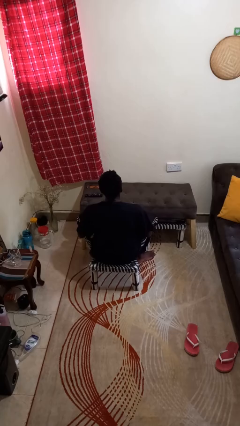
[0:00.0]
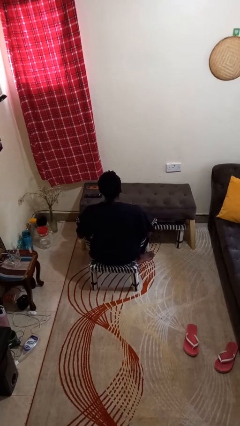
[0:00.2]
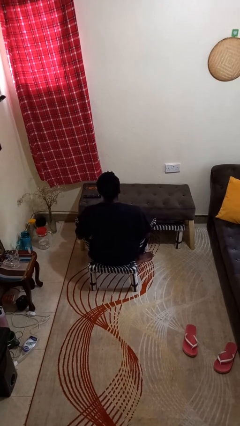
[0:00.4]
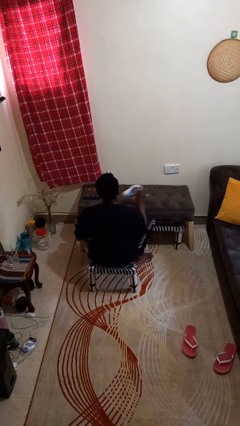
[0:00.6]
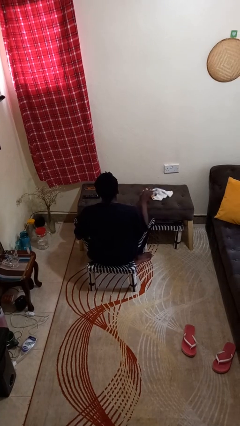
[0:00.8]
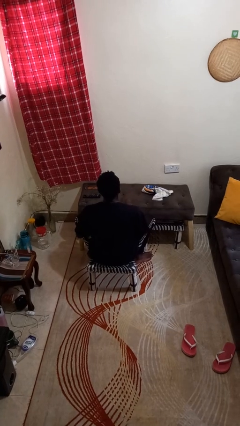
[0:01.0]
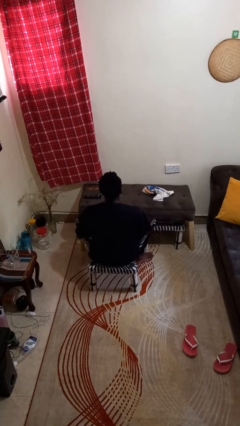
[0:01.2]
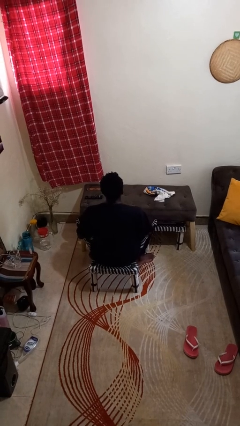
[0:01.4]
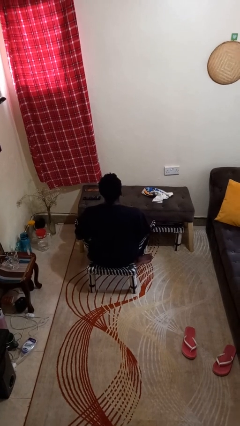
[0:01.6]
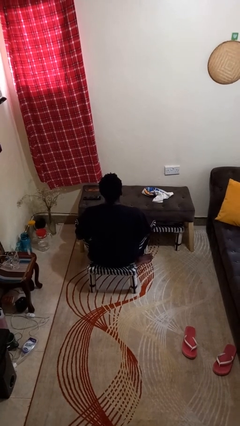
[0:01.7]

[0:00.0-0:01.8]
person throws object on table

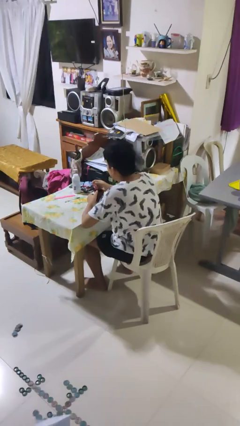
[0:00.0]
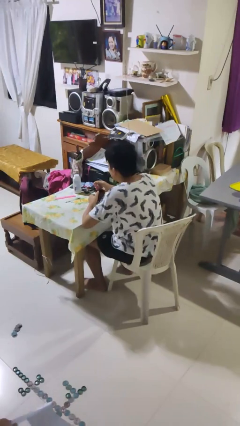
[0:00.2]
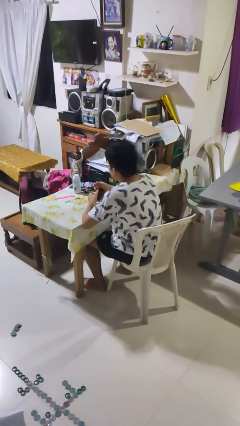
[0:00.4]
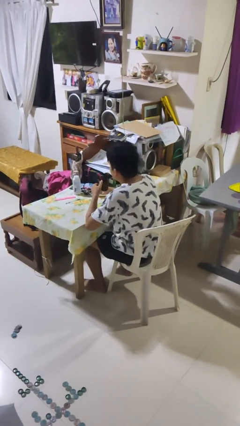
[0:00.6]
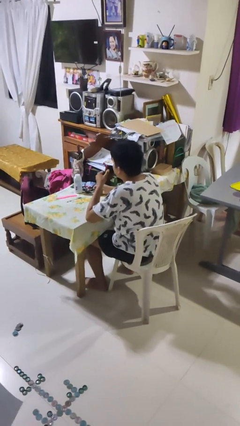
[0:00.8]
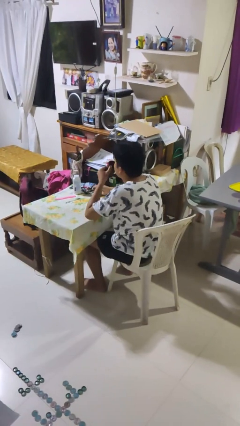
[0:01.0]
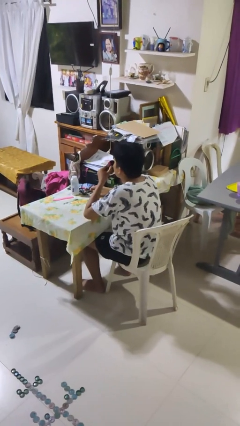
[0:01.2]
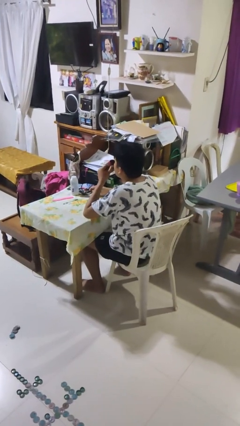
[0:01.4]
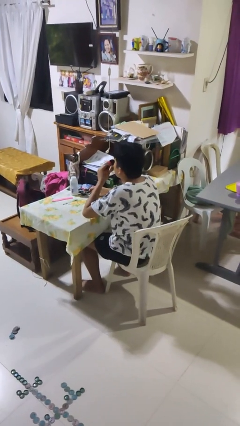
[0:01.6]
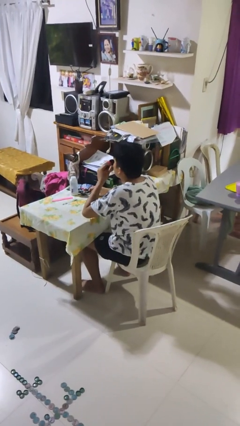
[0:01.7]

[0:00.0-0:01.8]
person drinks from mug

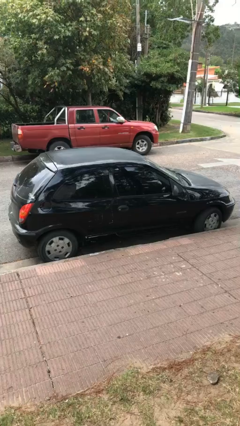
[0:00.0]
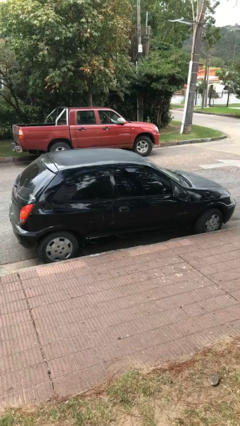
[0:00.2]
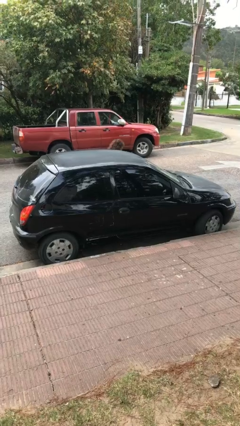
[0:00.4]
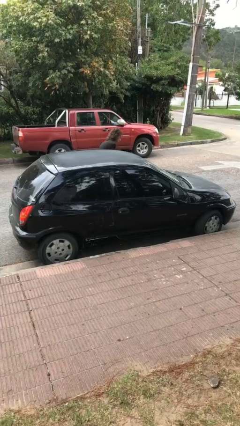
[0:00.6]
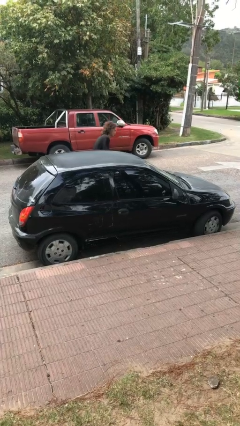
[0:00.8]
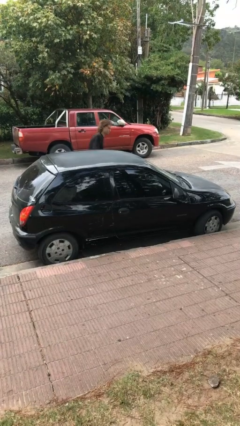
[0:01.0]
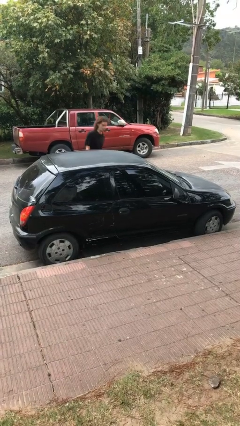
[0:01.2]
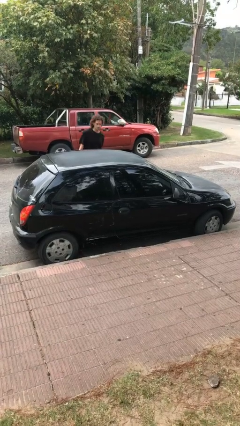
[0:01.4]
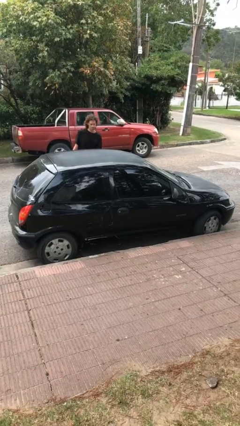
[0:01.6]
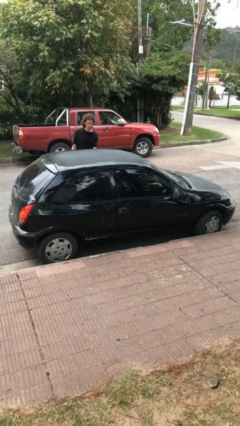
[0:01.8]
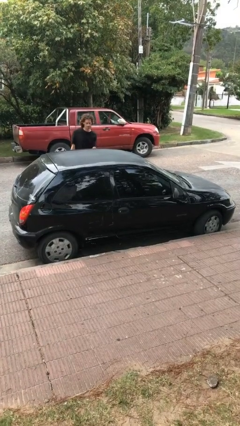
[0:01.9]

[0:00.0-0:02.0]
car drops off person

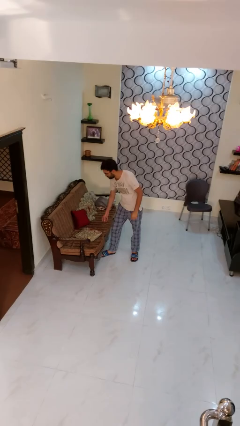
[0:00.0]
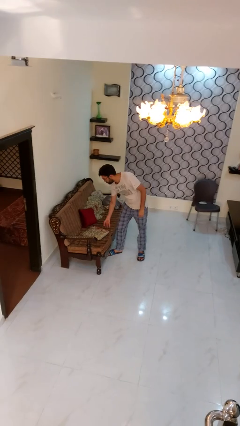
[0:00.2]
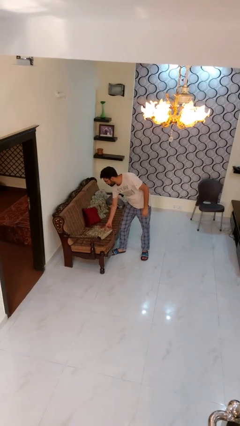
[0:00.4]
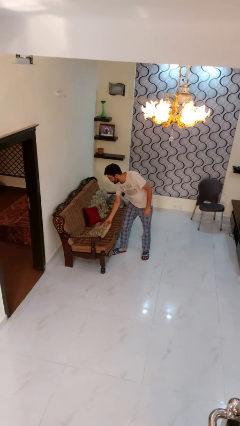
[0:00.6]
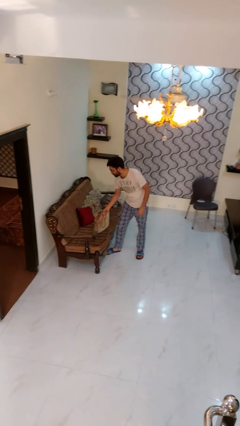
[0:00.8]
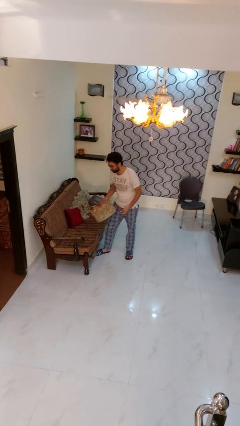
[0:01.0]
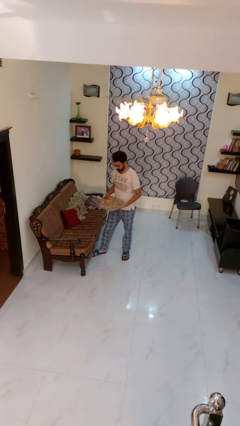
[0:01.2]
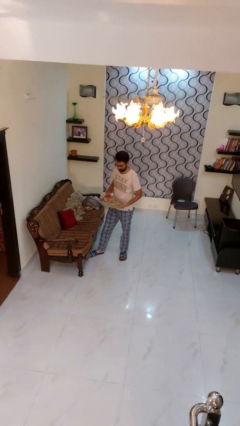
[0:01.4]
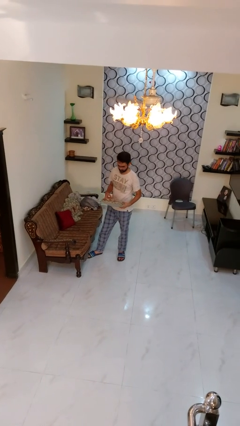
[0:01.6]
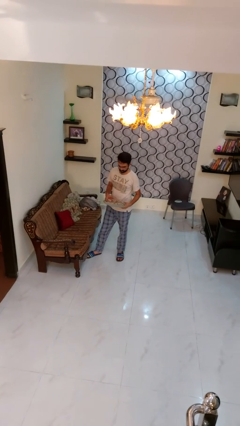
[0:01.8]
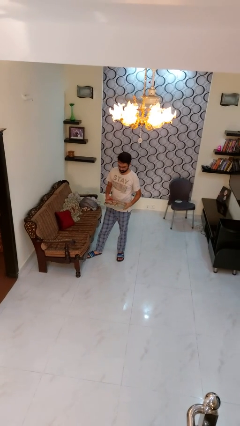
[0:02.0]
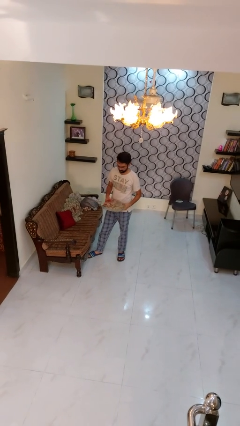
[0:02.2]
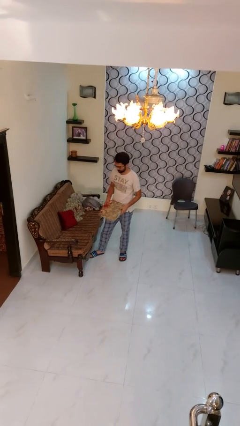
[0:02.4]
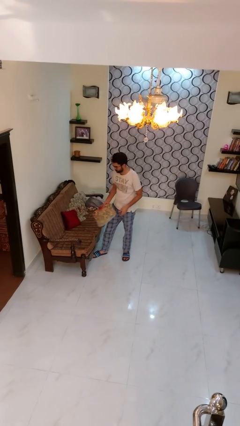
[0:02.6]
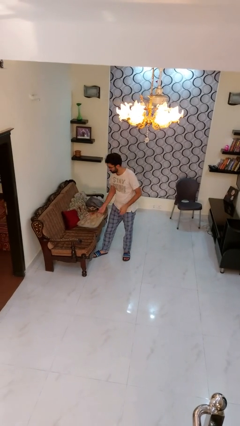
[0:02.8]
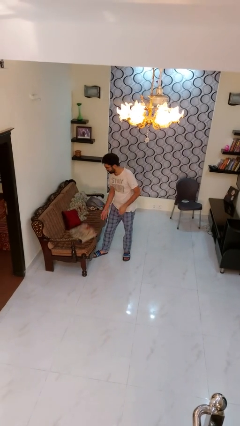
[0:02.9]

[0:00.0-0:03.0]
person picks up object from couch

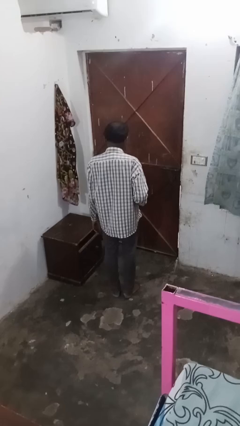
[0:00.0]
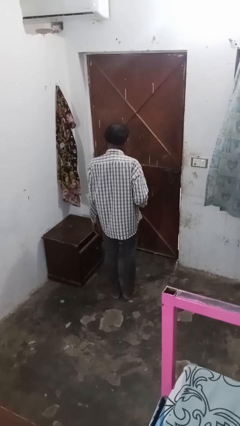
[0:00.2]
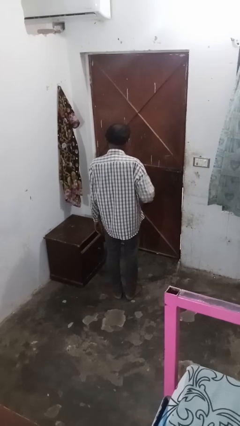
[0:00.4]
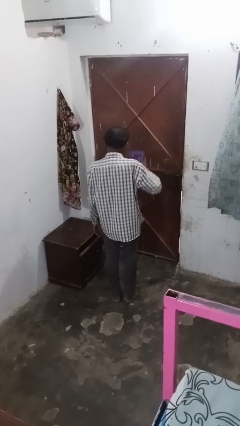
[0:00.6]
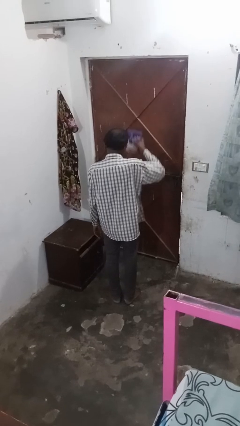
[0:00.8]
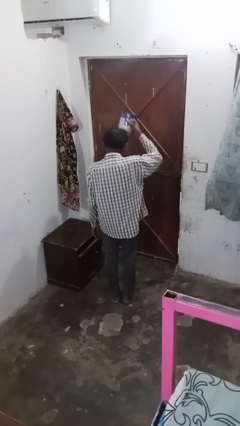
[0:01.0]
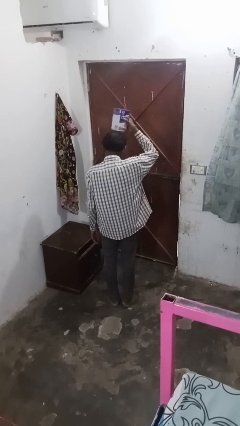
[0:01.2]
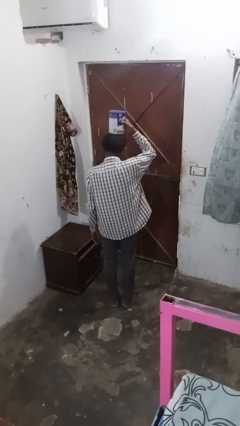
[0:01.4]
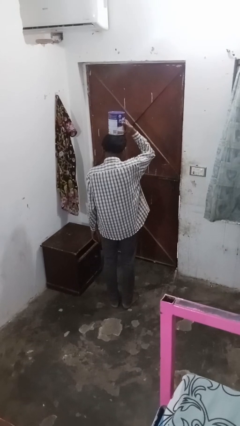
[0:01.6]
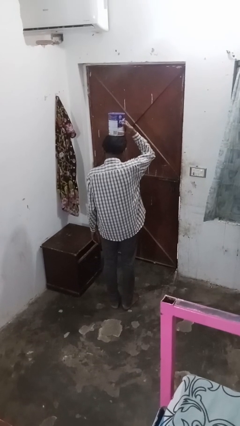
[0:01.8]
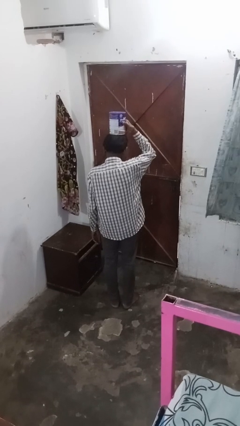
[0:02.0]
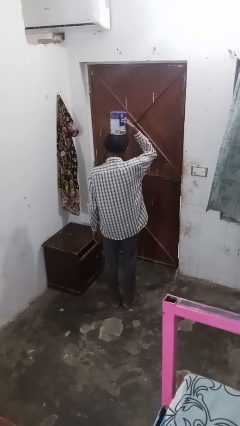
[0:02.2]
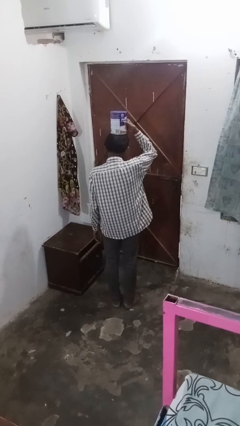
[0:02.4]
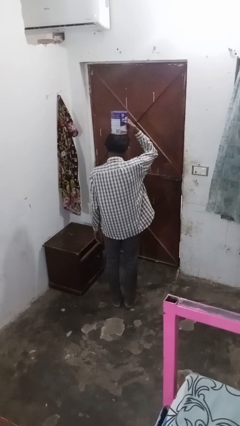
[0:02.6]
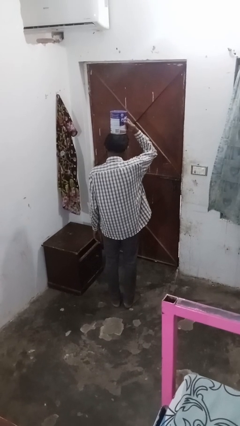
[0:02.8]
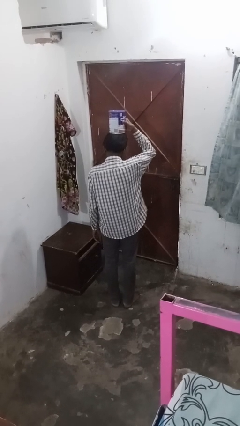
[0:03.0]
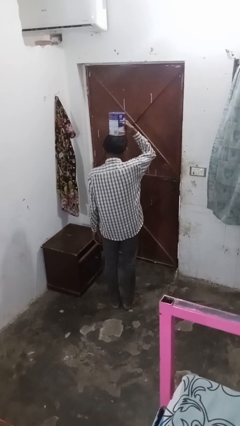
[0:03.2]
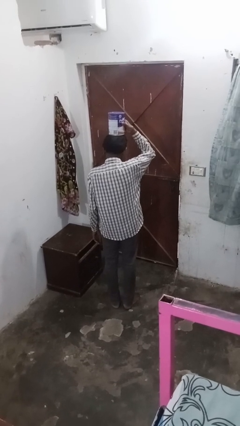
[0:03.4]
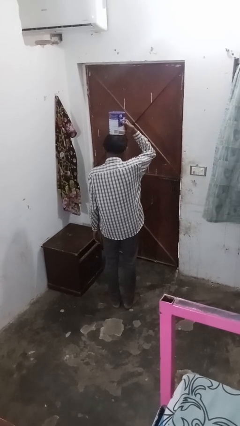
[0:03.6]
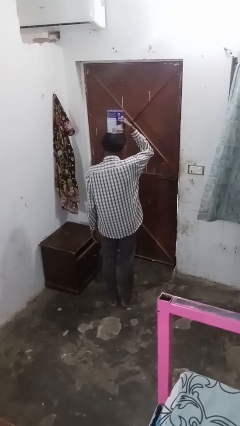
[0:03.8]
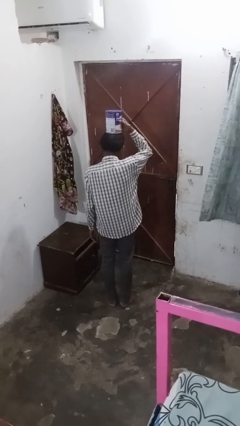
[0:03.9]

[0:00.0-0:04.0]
person holds object above head

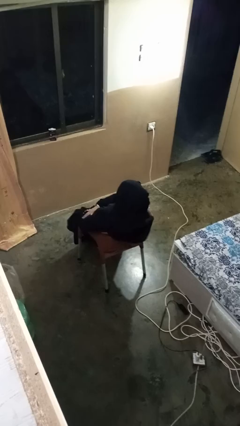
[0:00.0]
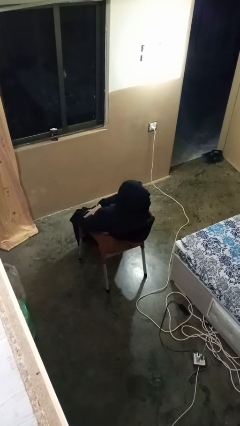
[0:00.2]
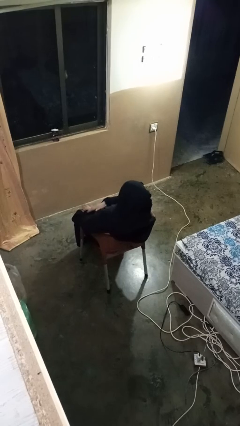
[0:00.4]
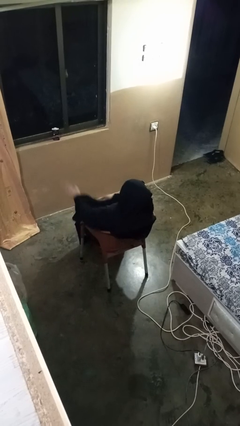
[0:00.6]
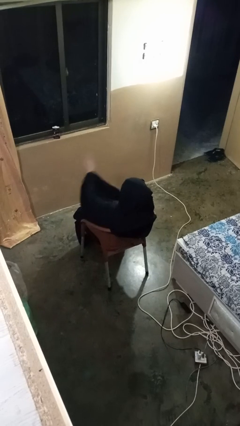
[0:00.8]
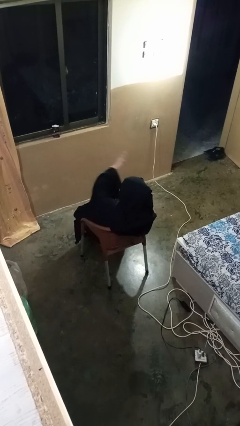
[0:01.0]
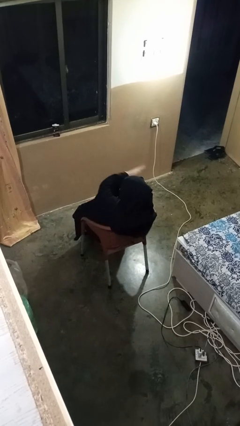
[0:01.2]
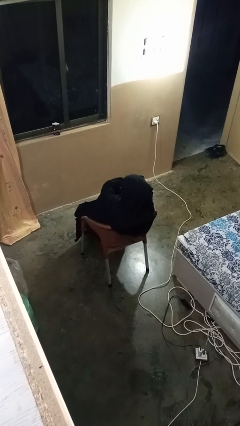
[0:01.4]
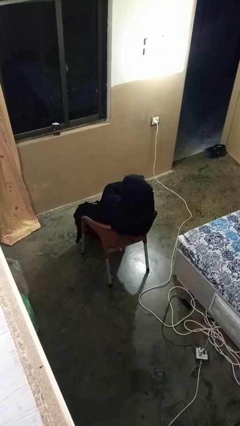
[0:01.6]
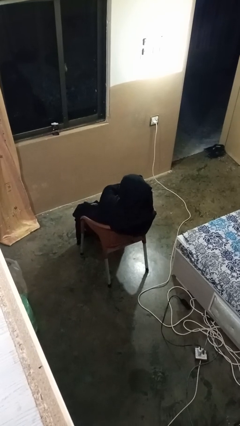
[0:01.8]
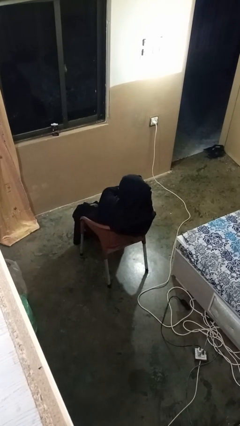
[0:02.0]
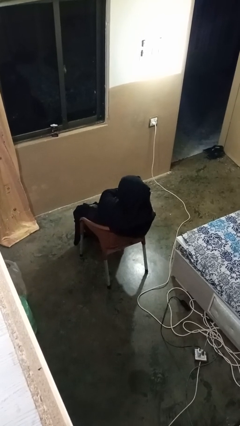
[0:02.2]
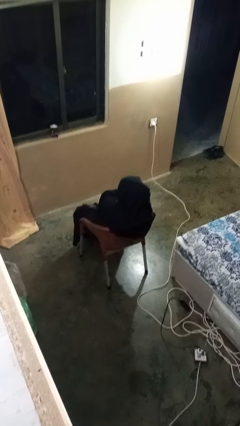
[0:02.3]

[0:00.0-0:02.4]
person gestures swipe right

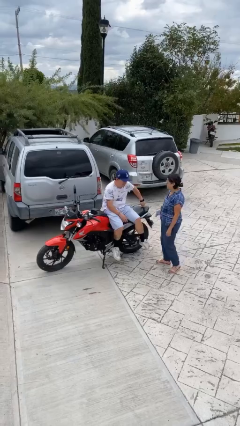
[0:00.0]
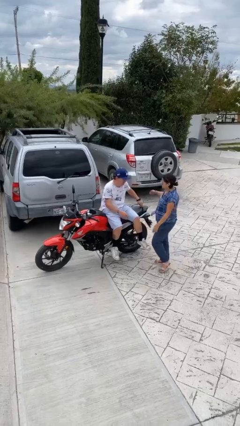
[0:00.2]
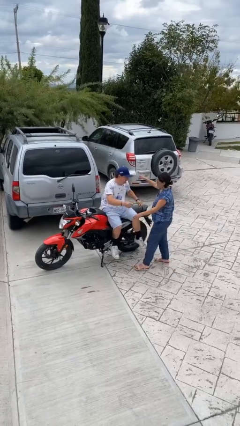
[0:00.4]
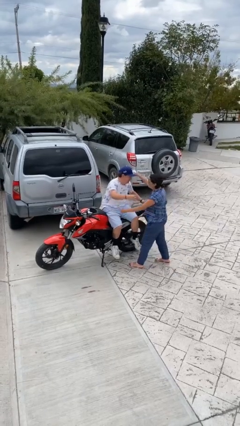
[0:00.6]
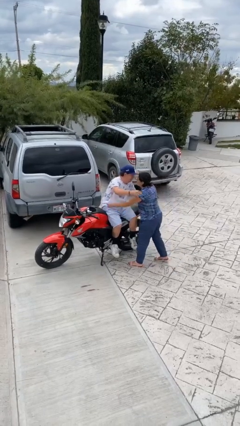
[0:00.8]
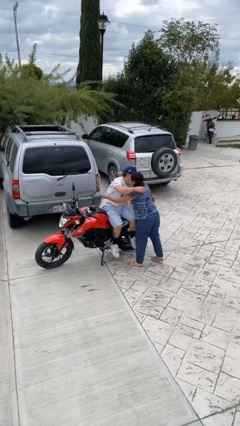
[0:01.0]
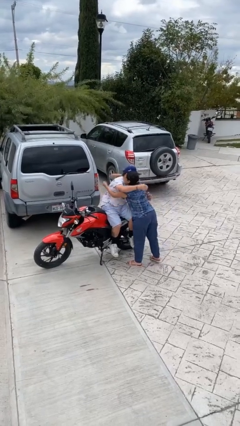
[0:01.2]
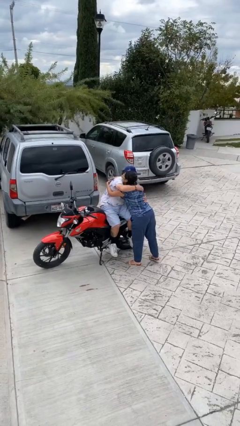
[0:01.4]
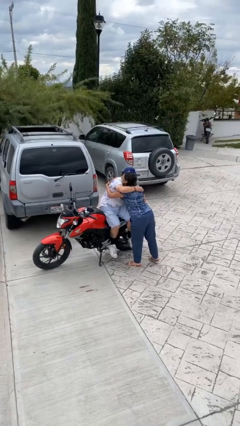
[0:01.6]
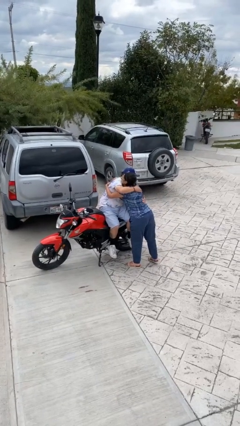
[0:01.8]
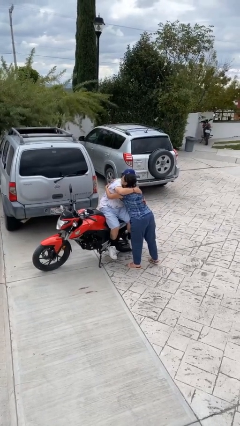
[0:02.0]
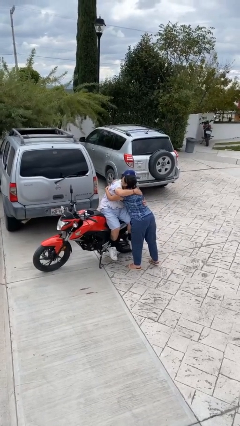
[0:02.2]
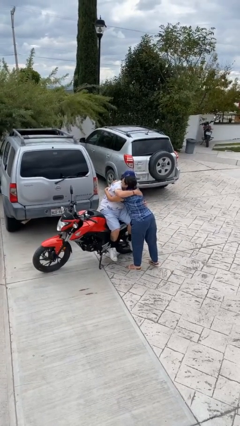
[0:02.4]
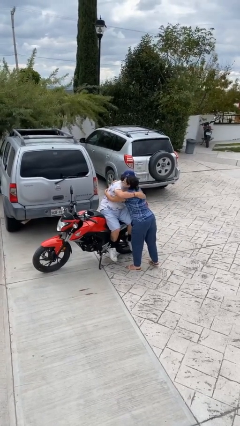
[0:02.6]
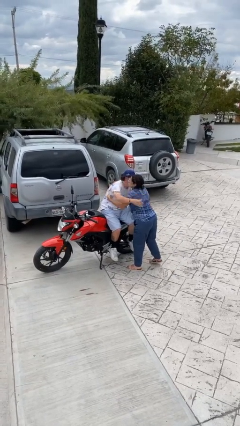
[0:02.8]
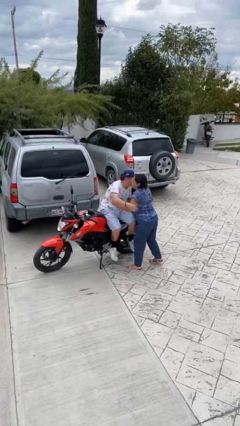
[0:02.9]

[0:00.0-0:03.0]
person embraces person
